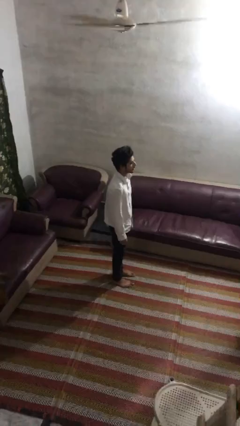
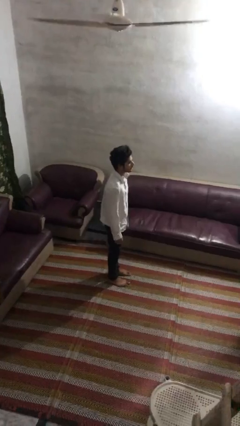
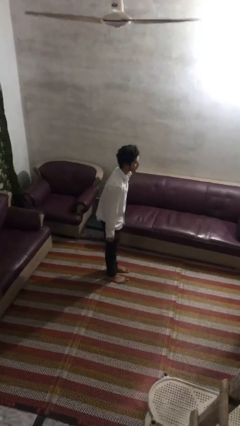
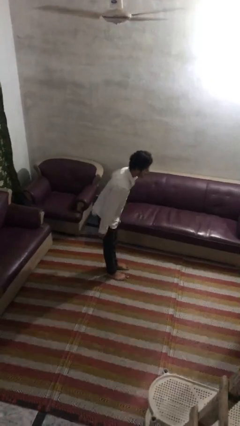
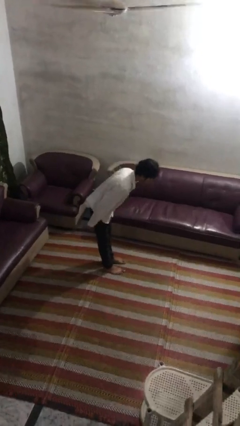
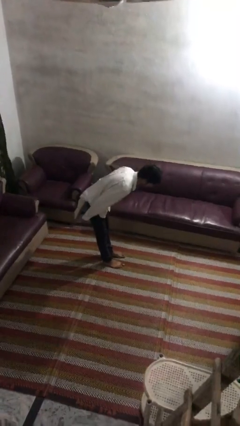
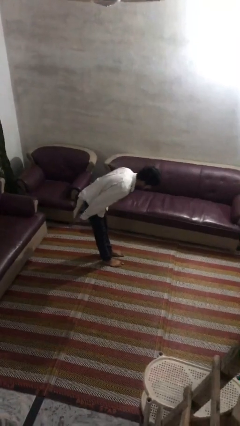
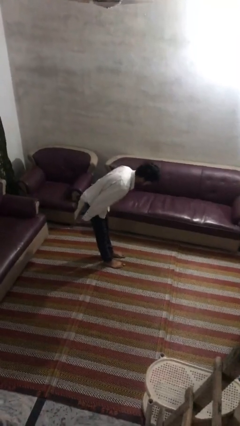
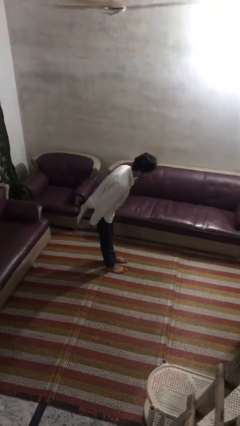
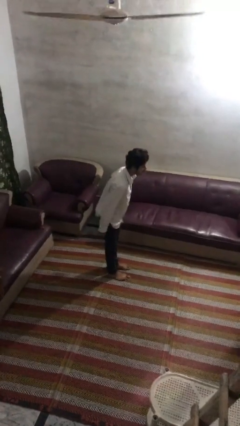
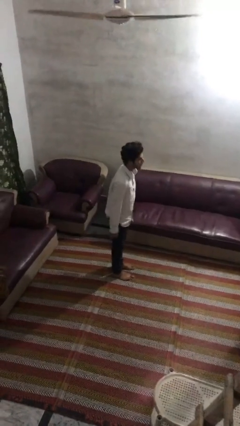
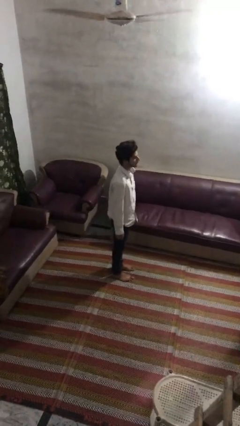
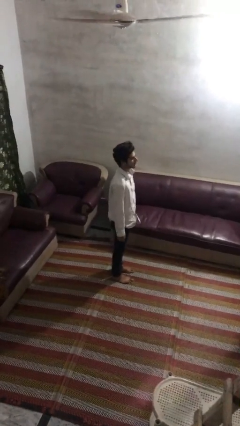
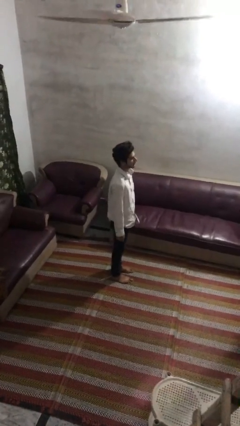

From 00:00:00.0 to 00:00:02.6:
person bows

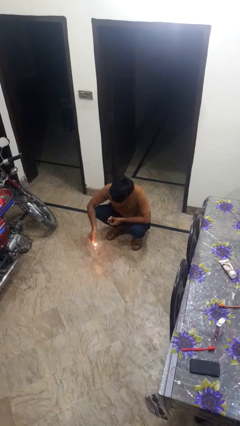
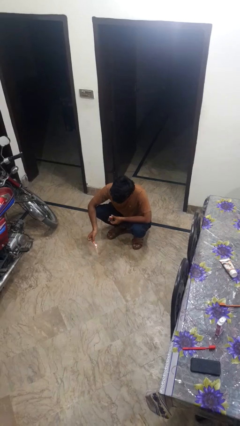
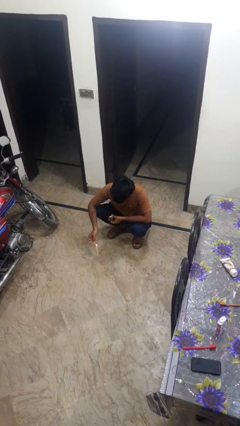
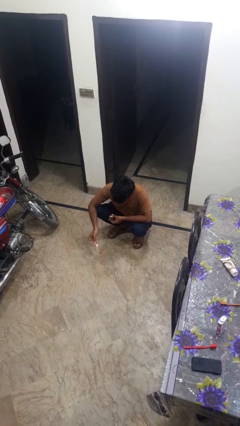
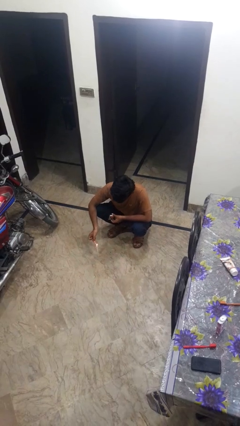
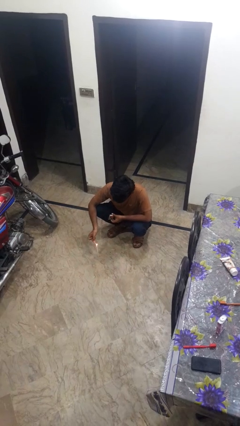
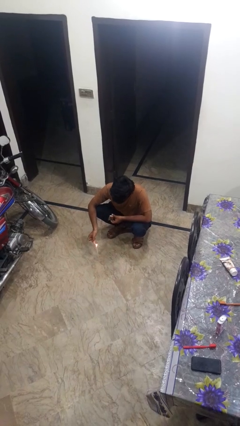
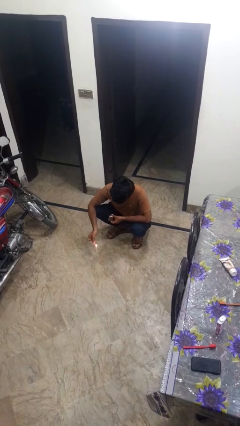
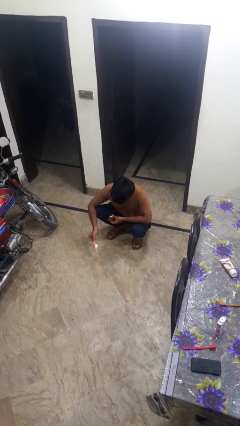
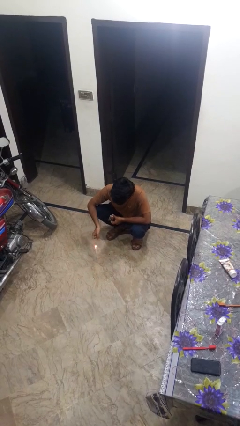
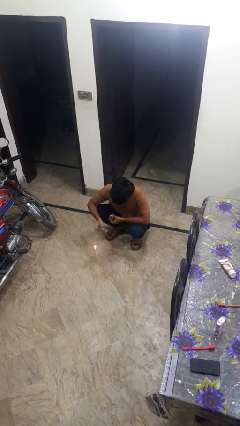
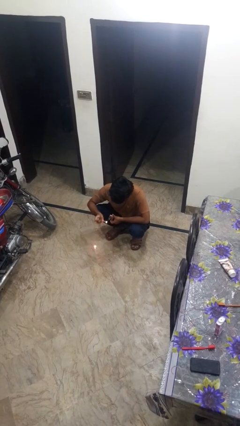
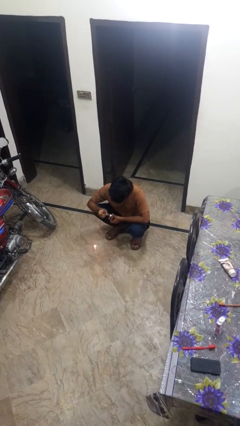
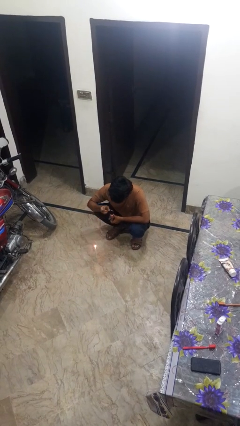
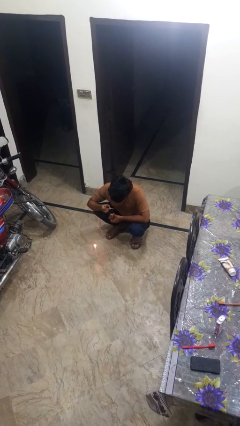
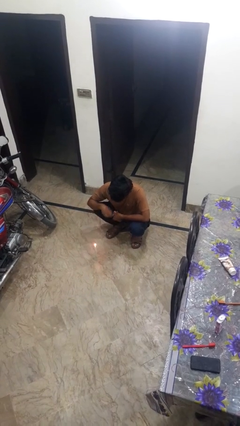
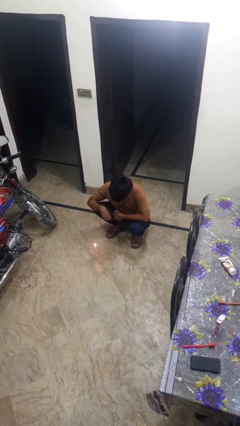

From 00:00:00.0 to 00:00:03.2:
person lights candle

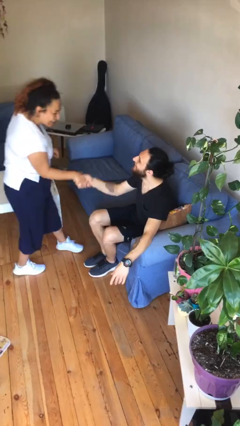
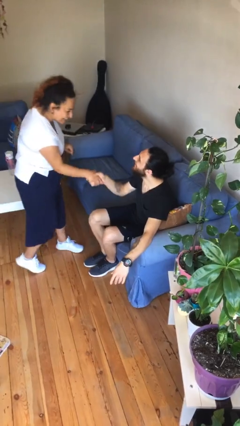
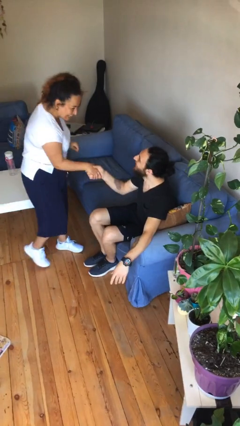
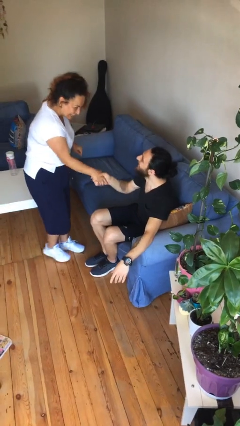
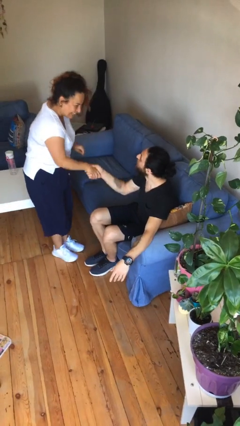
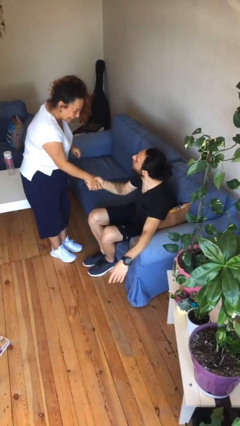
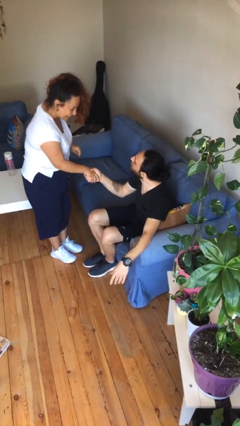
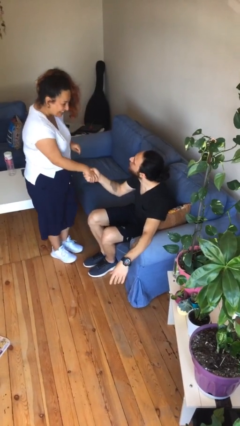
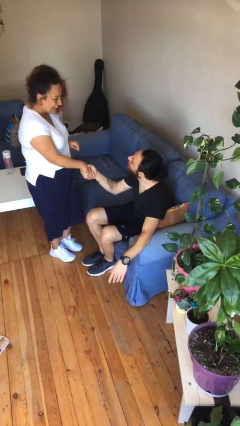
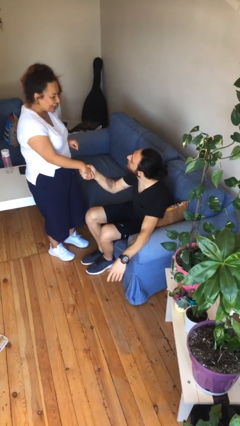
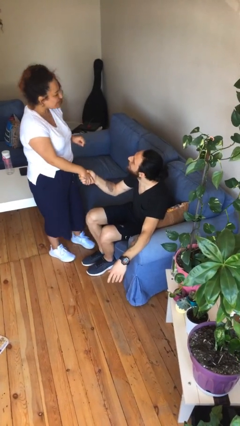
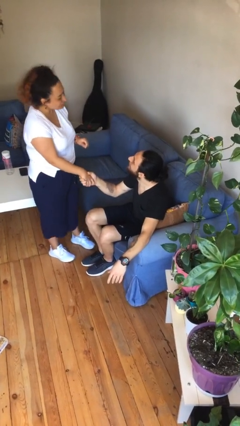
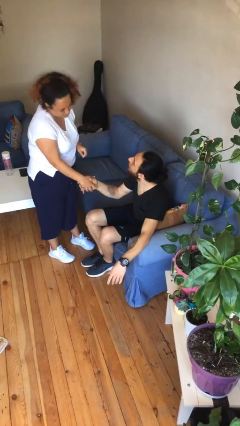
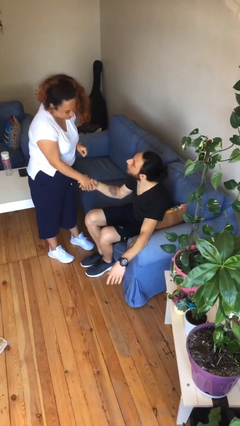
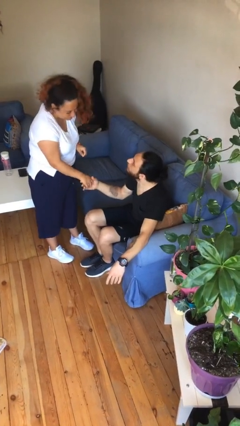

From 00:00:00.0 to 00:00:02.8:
person shakes hand

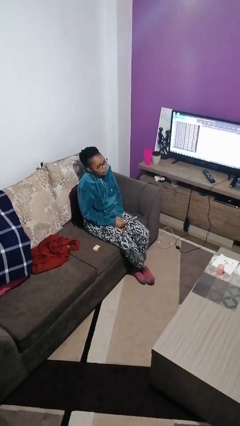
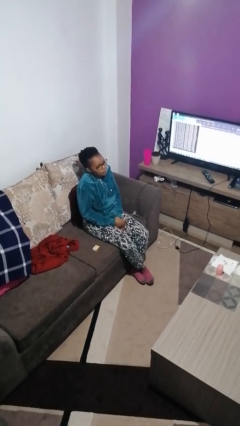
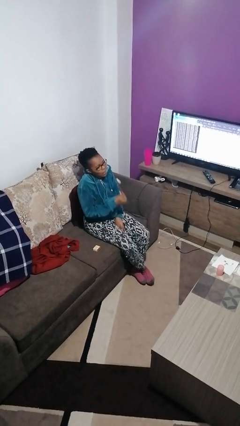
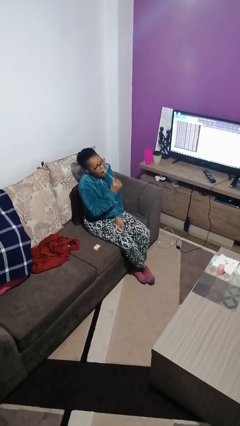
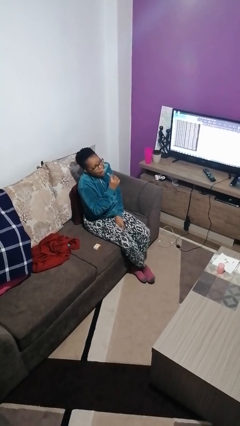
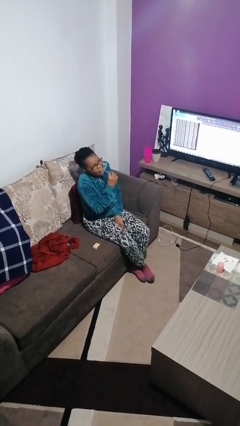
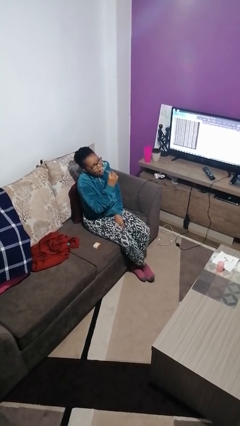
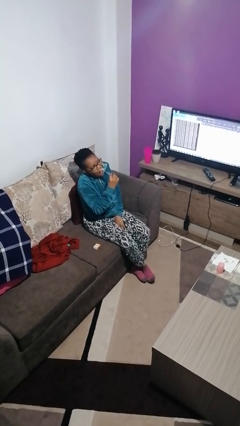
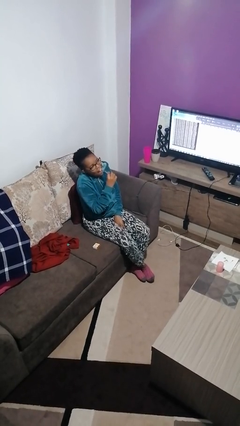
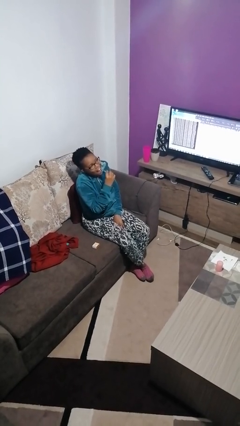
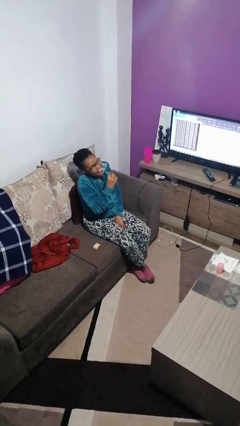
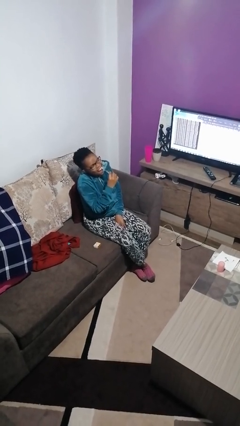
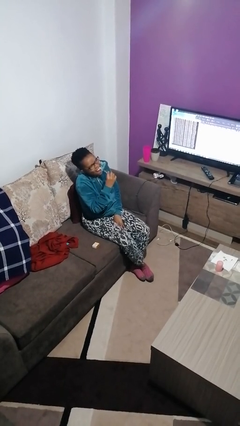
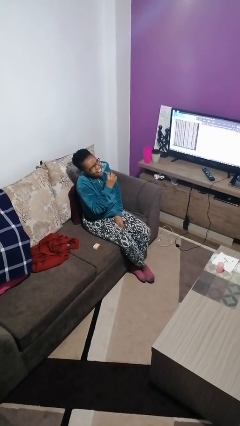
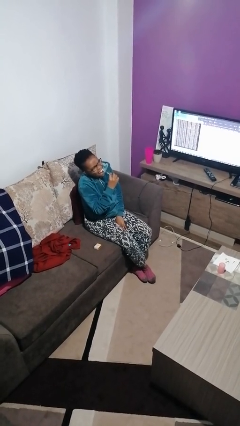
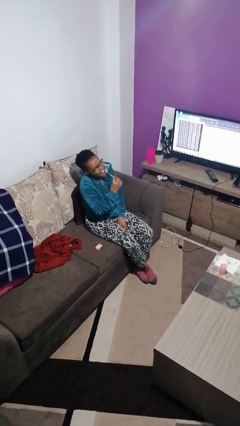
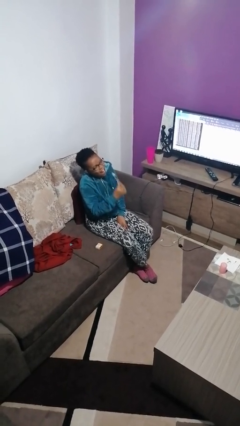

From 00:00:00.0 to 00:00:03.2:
person brushes teeth

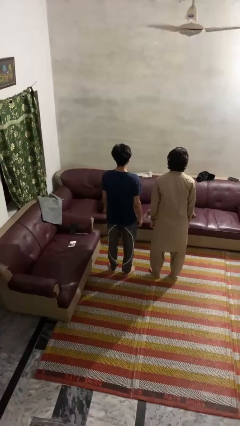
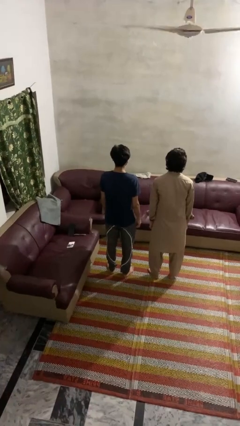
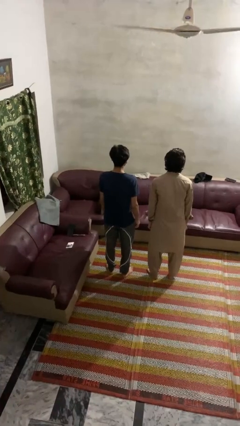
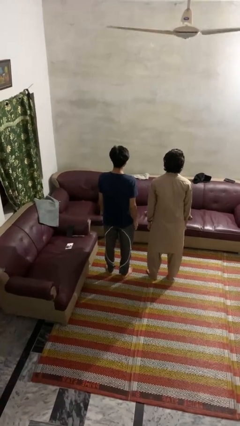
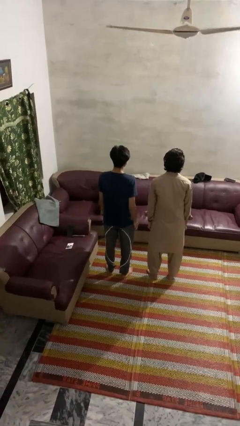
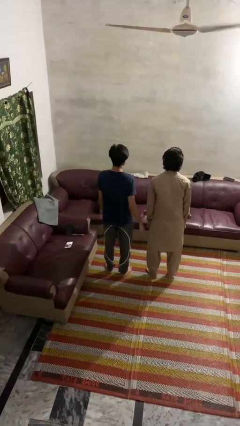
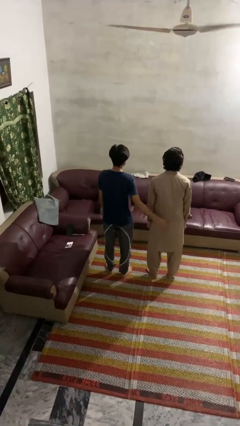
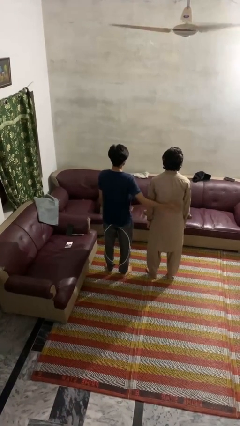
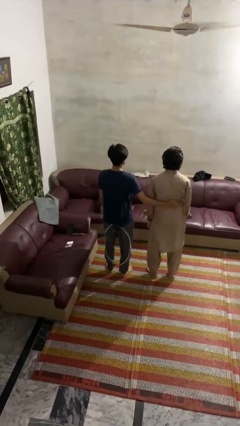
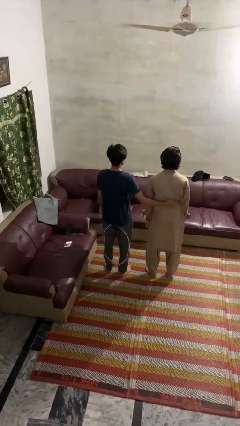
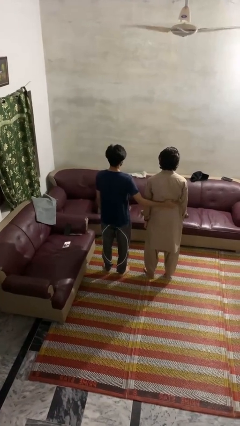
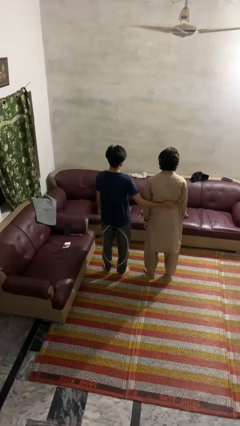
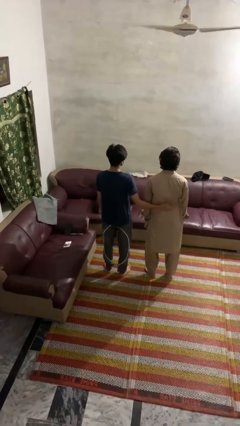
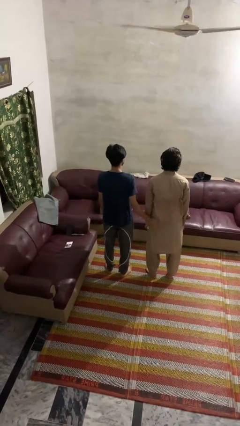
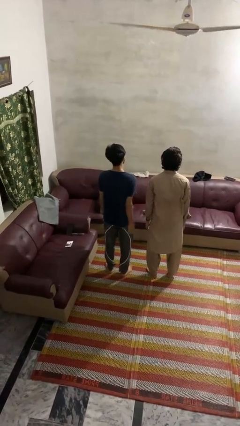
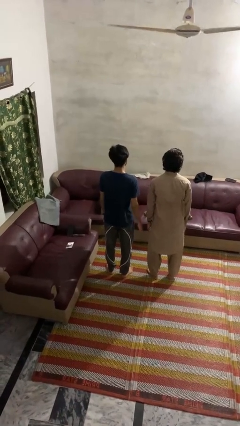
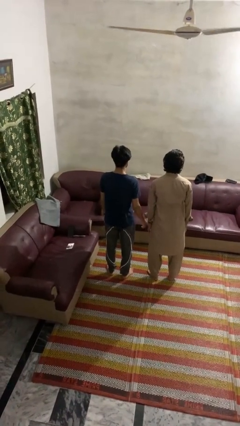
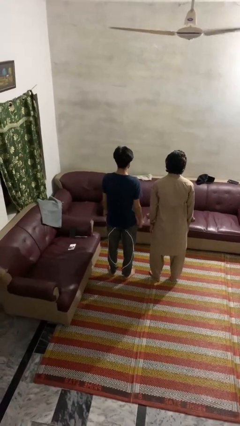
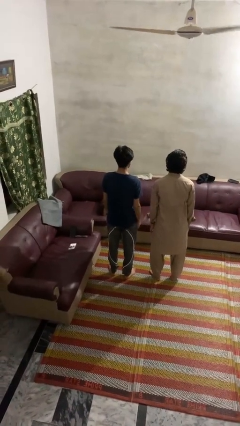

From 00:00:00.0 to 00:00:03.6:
person touches back of person

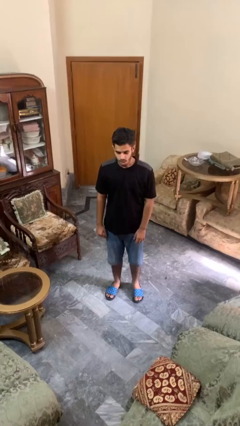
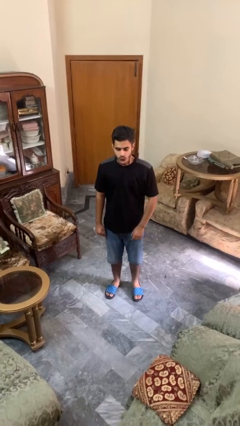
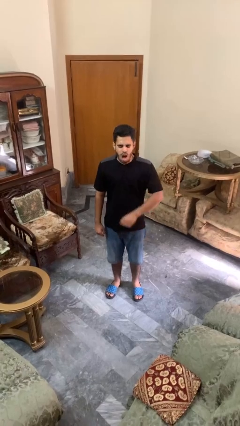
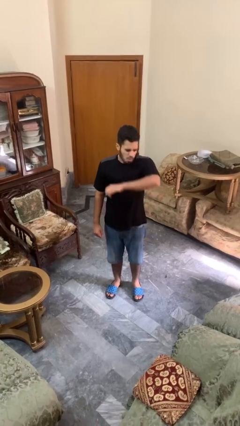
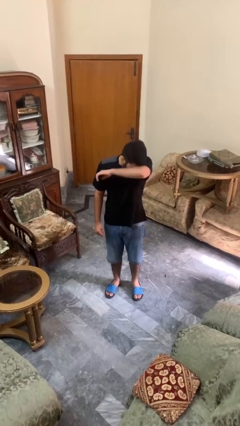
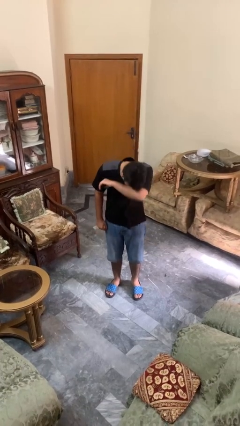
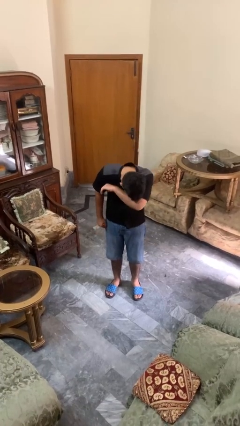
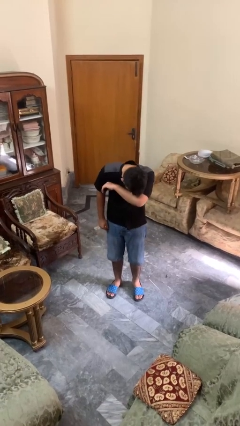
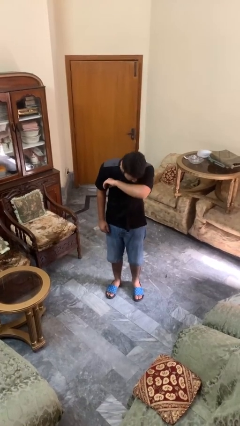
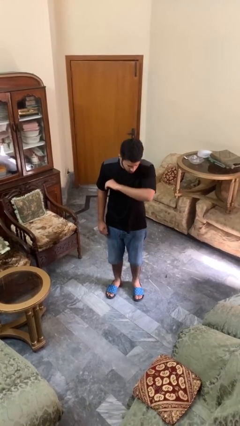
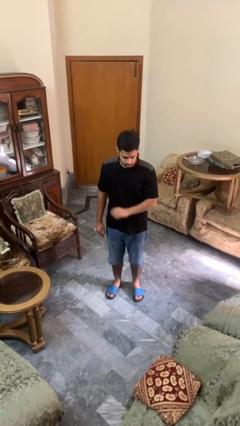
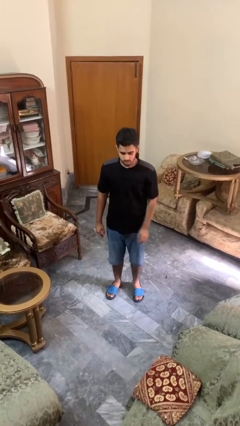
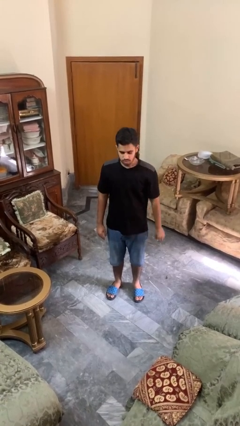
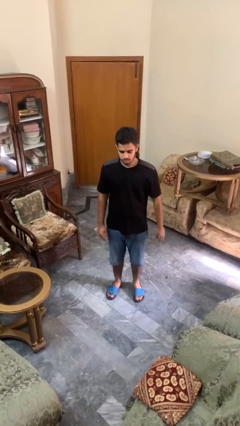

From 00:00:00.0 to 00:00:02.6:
person sneezes into arm
